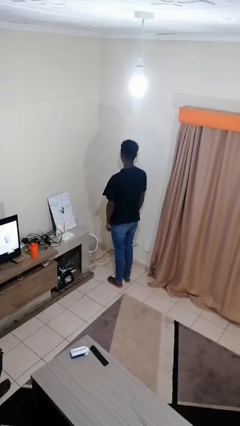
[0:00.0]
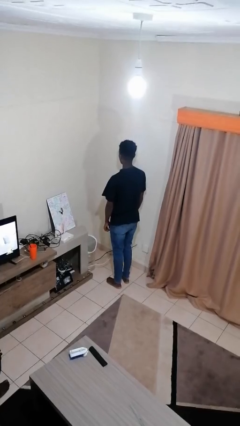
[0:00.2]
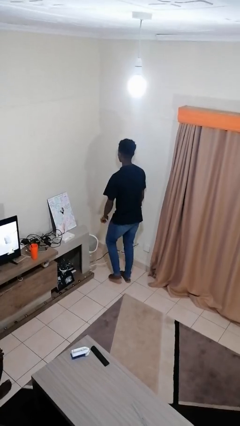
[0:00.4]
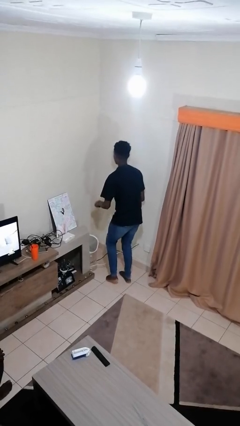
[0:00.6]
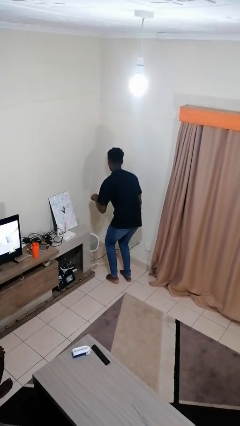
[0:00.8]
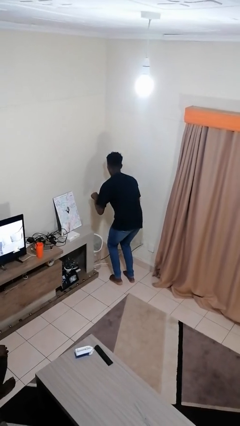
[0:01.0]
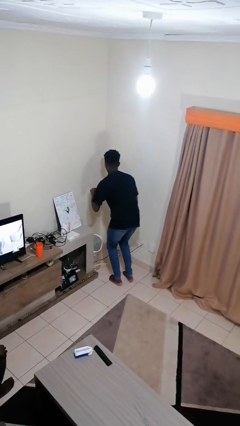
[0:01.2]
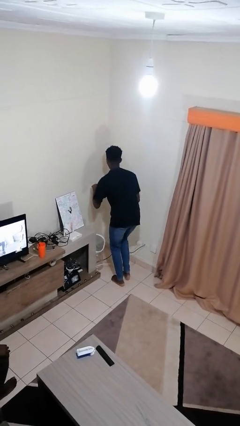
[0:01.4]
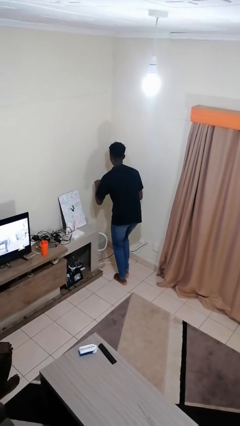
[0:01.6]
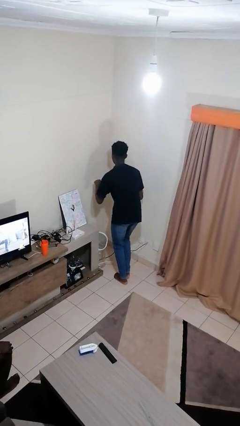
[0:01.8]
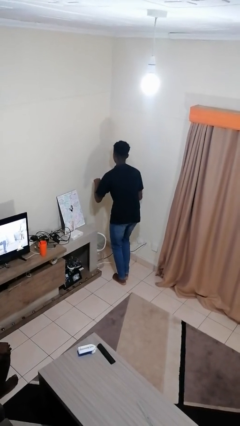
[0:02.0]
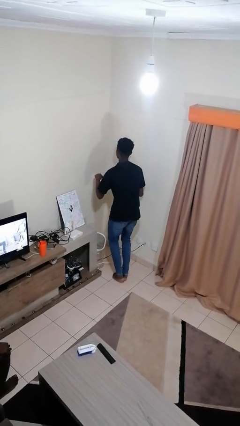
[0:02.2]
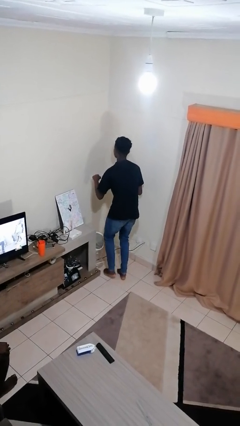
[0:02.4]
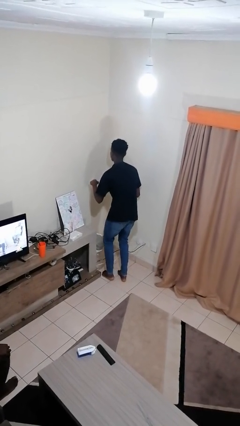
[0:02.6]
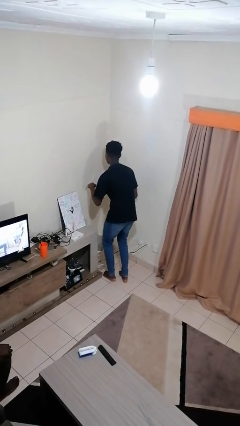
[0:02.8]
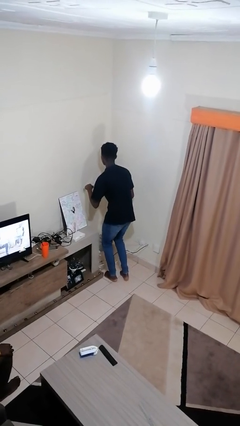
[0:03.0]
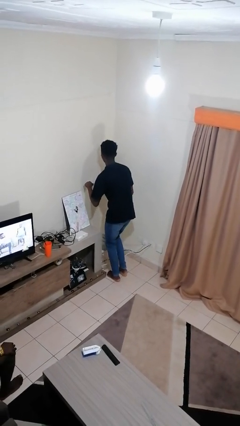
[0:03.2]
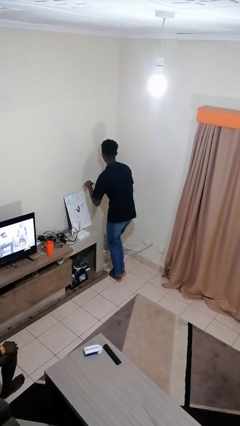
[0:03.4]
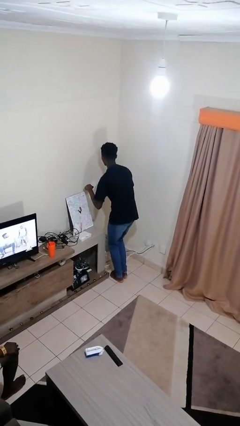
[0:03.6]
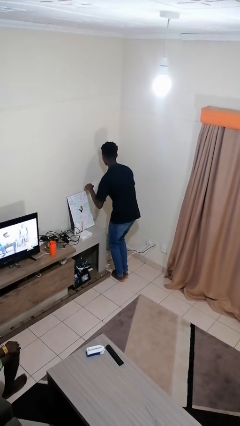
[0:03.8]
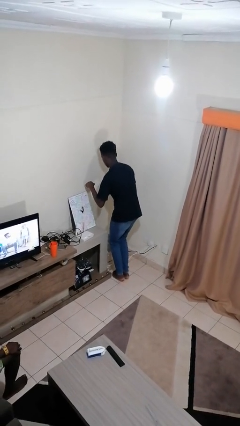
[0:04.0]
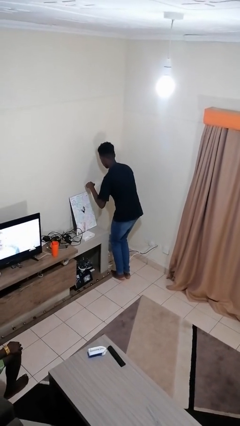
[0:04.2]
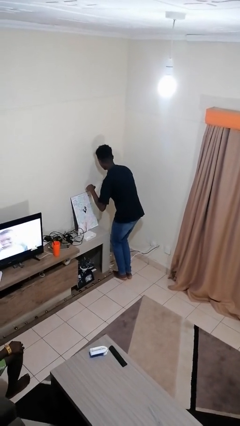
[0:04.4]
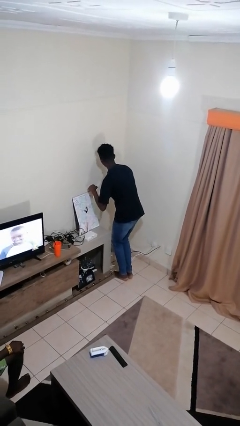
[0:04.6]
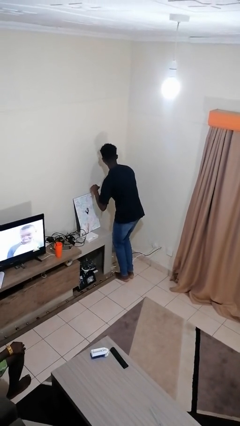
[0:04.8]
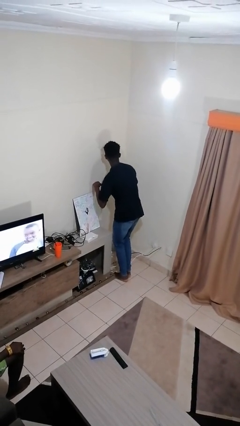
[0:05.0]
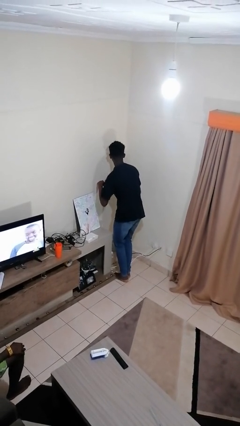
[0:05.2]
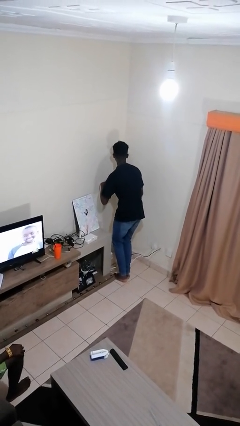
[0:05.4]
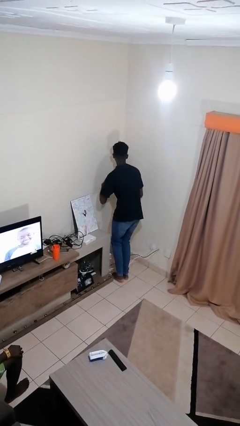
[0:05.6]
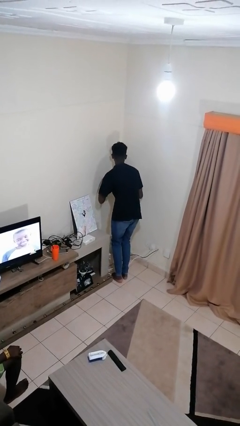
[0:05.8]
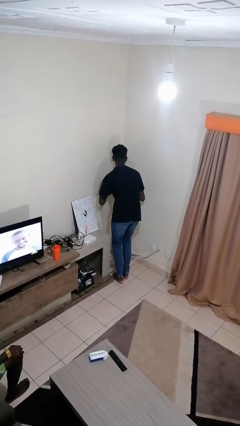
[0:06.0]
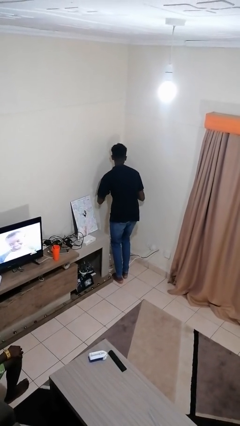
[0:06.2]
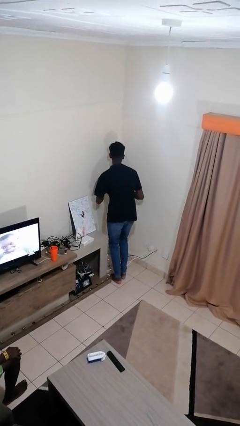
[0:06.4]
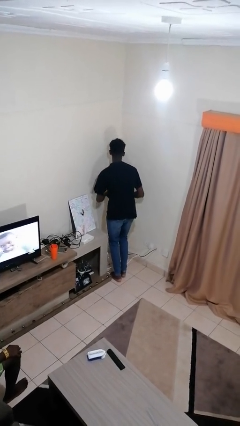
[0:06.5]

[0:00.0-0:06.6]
person walks tiptoe

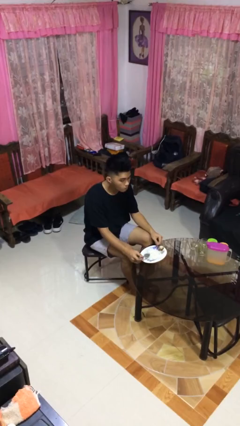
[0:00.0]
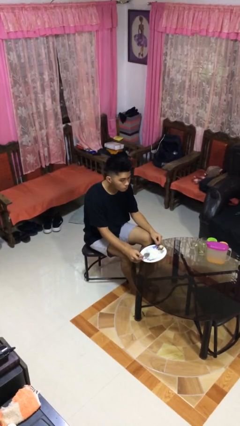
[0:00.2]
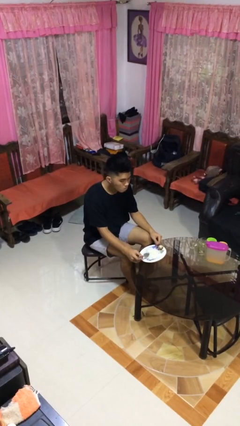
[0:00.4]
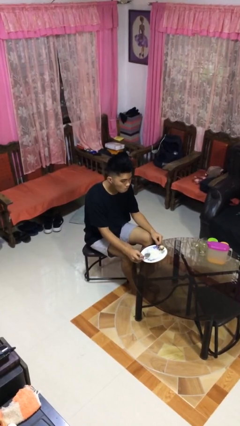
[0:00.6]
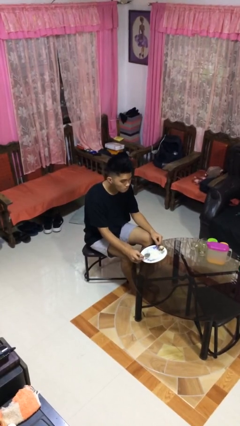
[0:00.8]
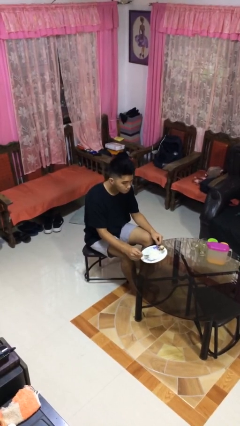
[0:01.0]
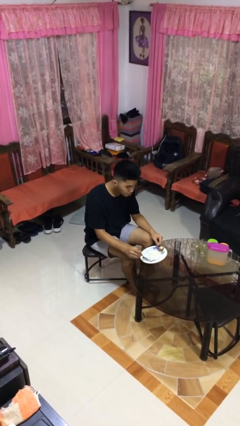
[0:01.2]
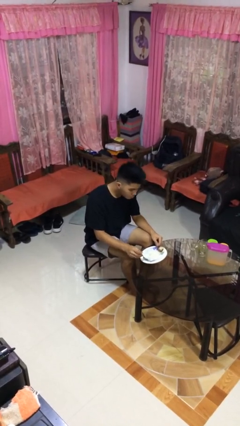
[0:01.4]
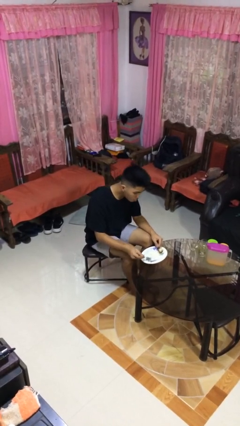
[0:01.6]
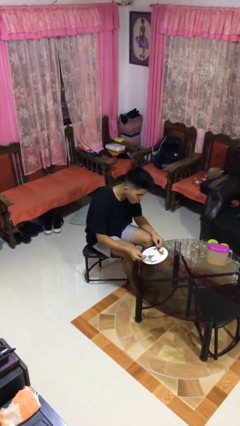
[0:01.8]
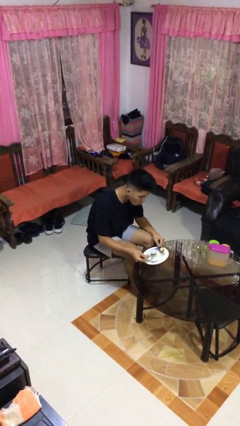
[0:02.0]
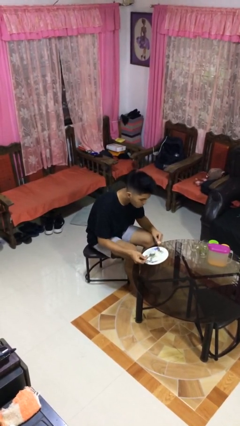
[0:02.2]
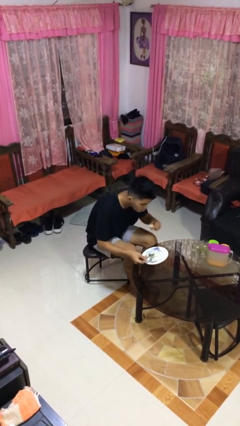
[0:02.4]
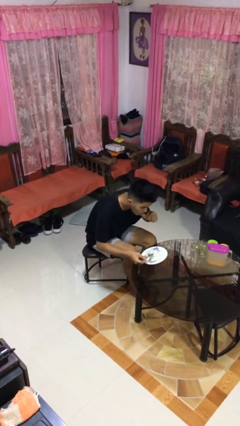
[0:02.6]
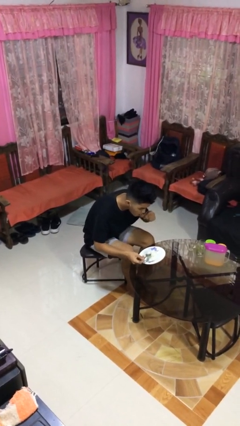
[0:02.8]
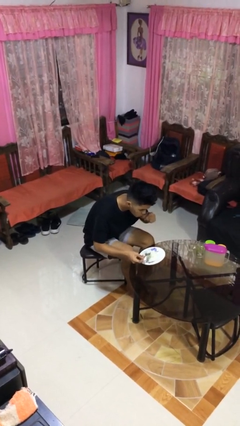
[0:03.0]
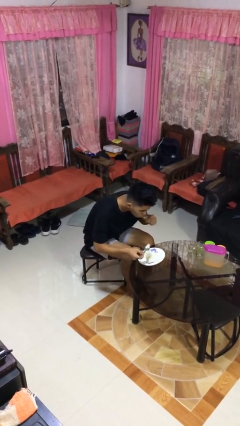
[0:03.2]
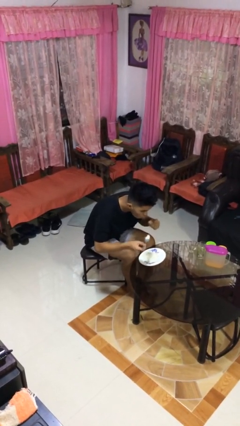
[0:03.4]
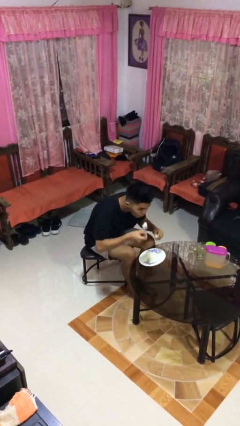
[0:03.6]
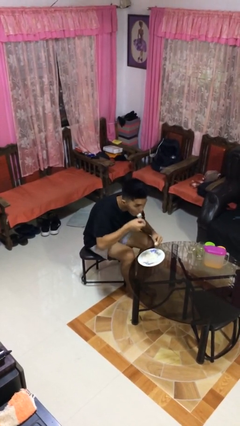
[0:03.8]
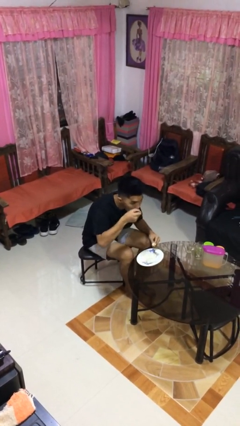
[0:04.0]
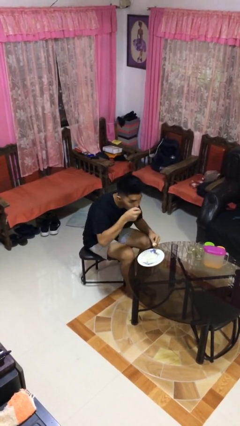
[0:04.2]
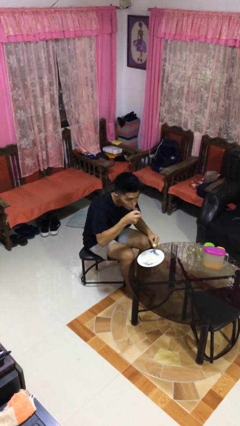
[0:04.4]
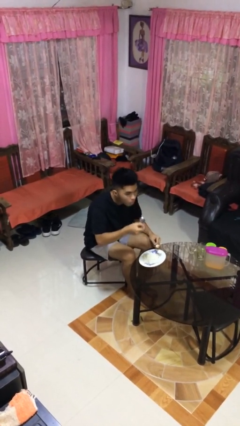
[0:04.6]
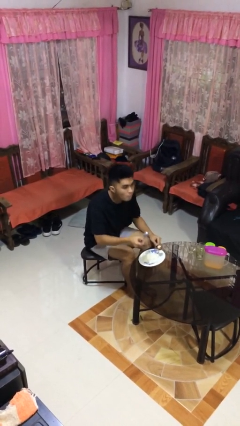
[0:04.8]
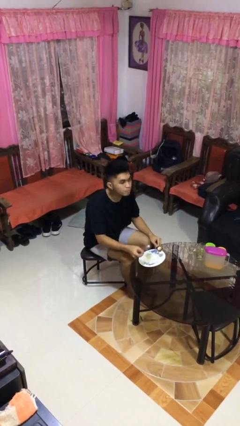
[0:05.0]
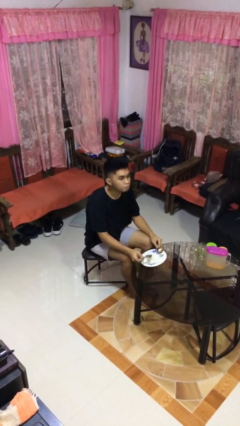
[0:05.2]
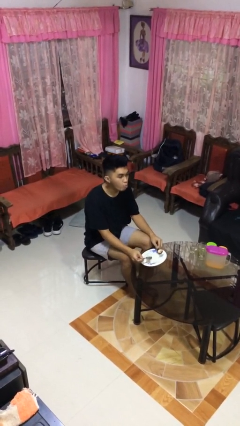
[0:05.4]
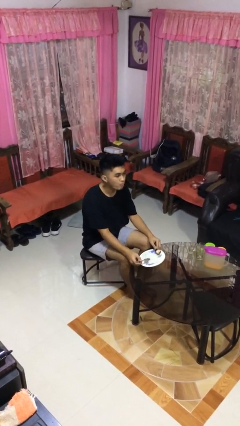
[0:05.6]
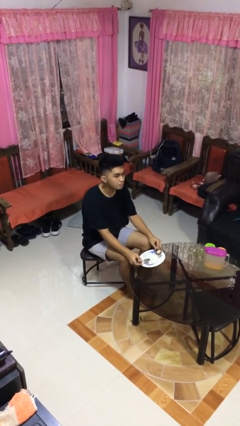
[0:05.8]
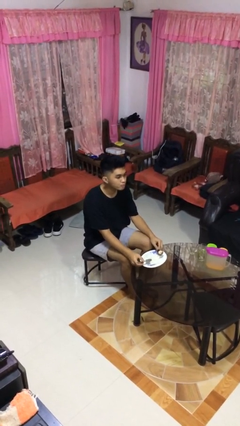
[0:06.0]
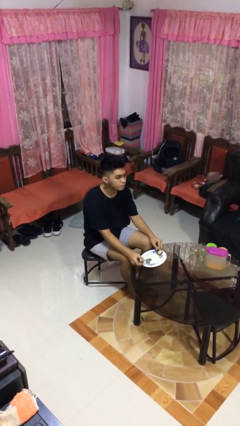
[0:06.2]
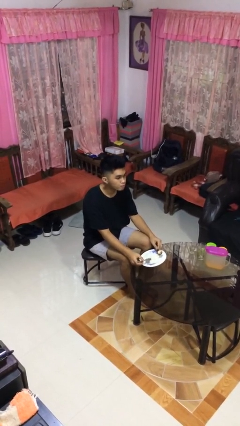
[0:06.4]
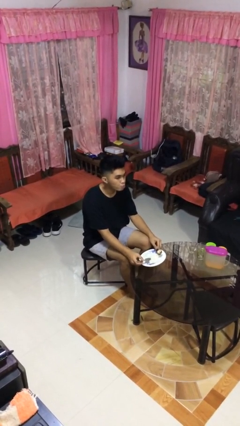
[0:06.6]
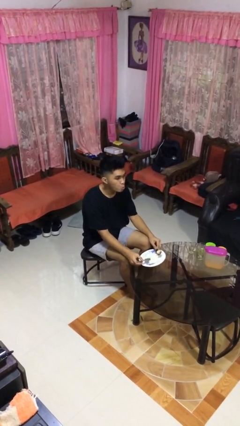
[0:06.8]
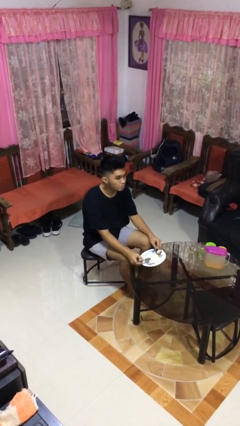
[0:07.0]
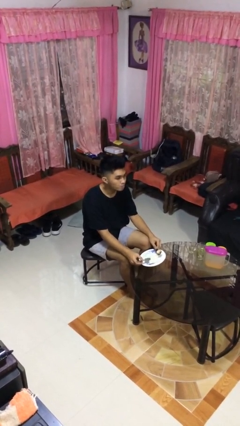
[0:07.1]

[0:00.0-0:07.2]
person eats with utensil

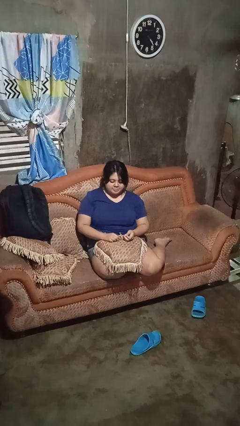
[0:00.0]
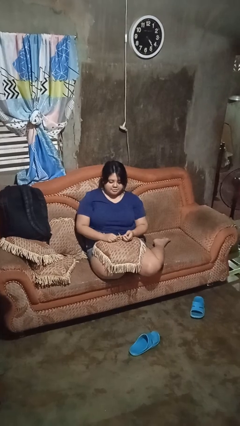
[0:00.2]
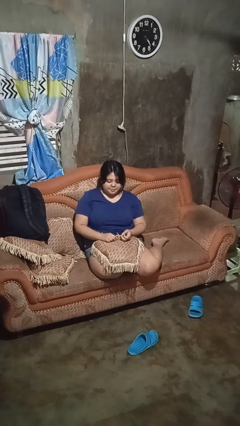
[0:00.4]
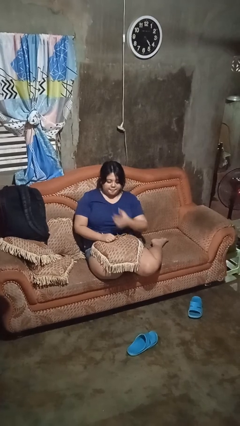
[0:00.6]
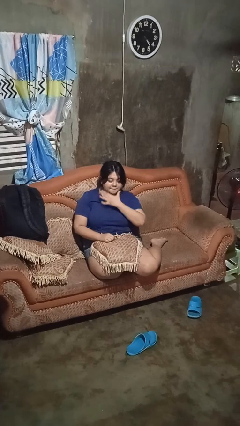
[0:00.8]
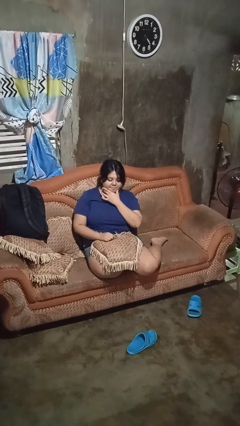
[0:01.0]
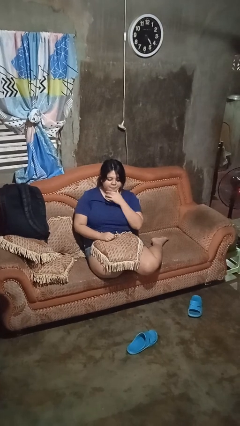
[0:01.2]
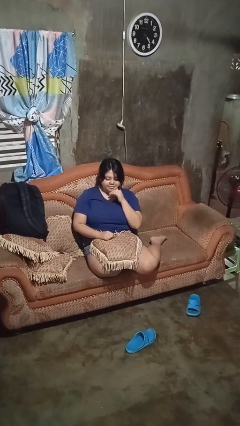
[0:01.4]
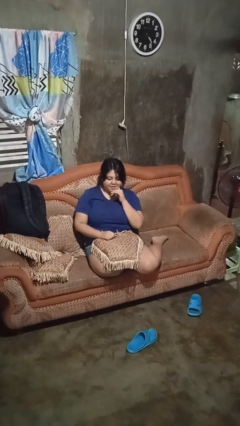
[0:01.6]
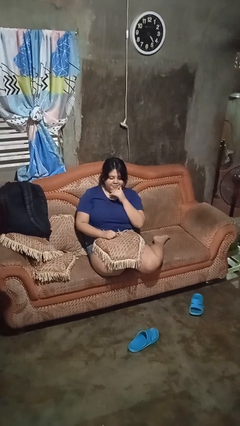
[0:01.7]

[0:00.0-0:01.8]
person strokes chin

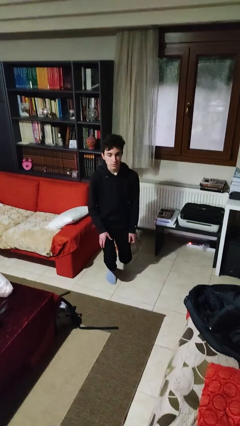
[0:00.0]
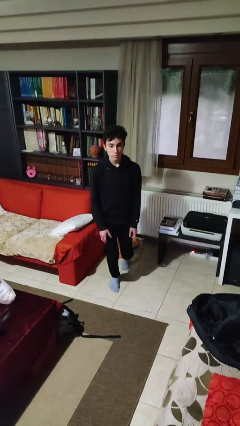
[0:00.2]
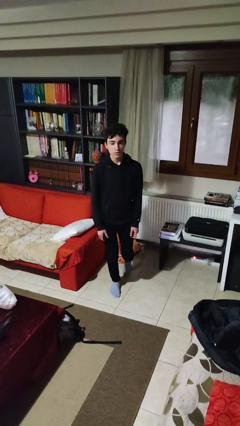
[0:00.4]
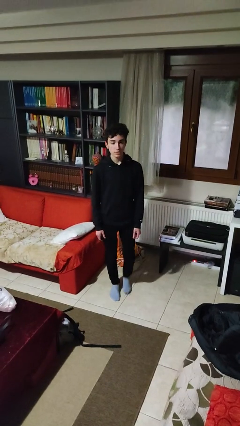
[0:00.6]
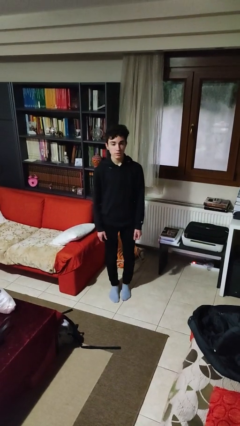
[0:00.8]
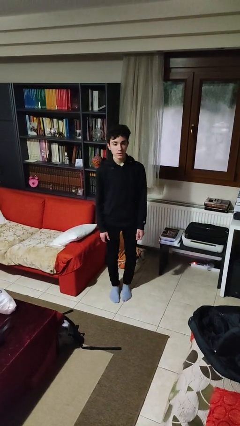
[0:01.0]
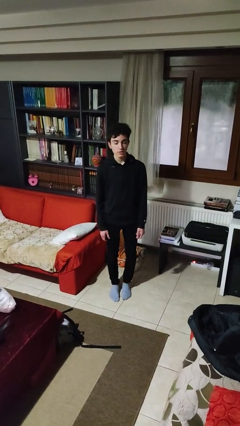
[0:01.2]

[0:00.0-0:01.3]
person stands up from floor

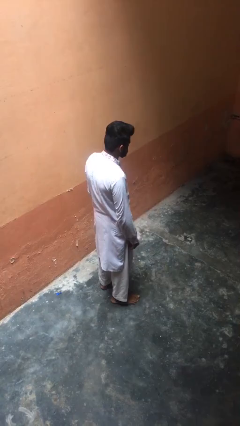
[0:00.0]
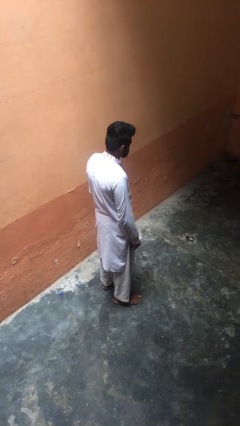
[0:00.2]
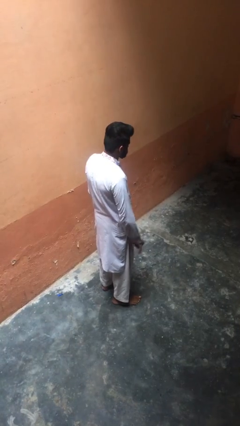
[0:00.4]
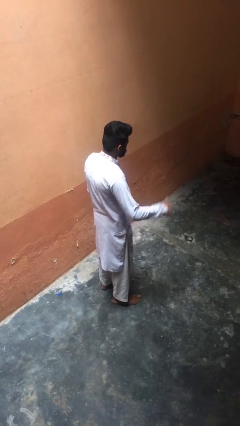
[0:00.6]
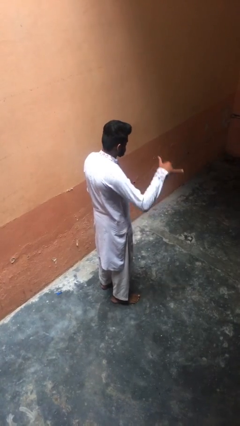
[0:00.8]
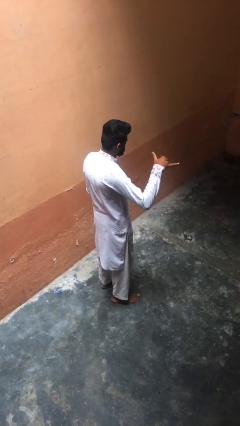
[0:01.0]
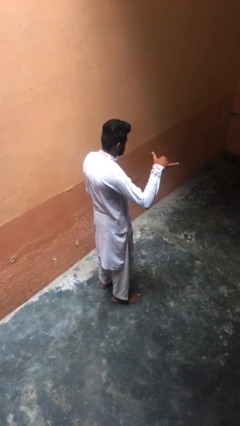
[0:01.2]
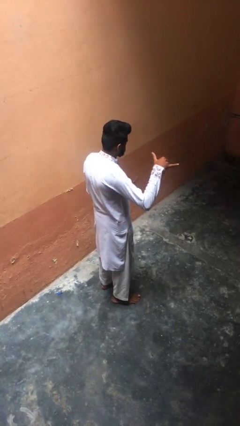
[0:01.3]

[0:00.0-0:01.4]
person gestures hang loose
